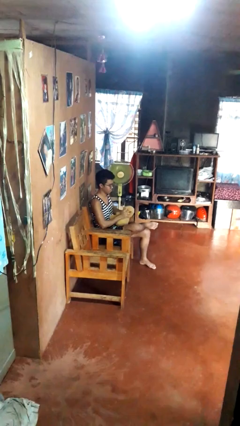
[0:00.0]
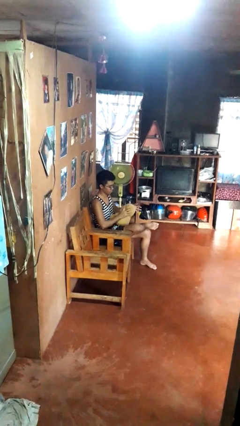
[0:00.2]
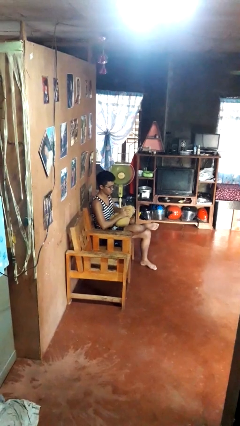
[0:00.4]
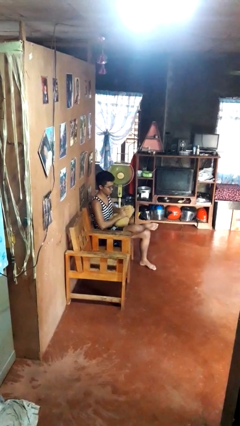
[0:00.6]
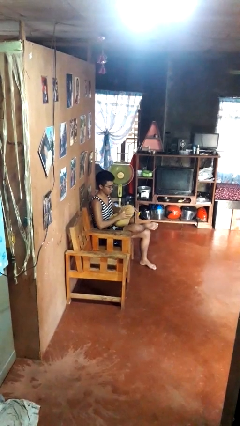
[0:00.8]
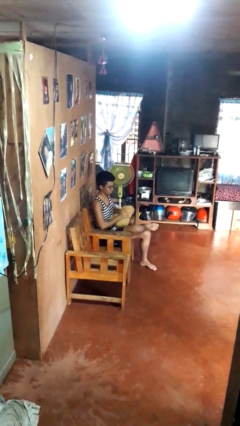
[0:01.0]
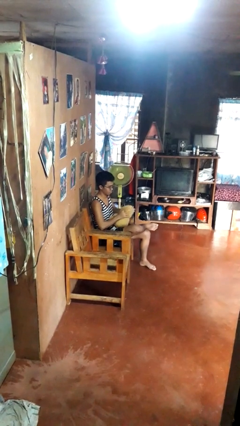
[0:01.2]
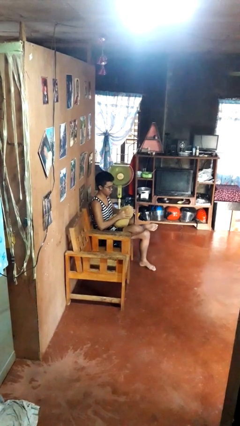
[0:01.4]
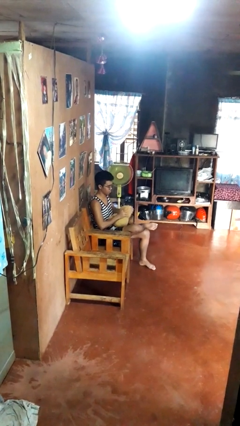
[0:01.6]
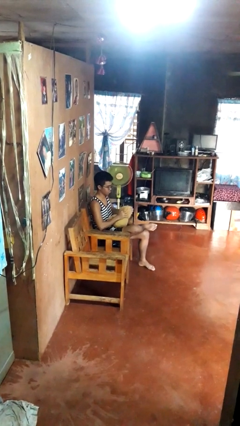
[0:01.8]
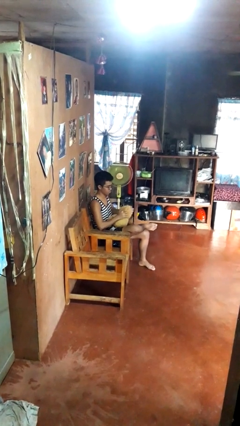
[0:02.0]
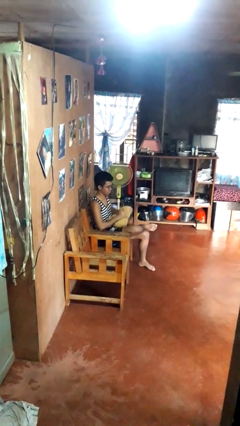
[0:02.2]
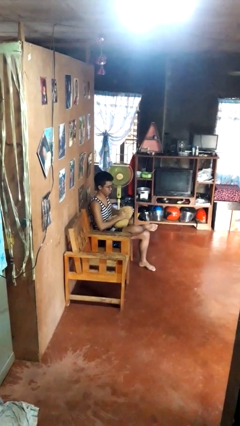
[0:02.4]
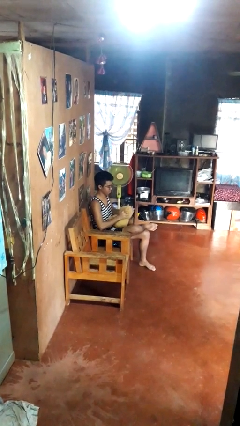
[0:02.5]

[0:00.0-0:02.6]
person squeezes object

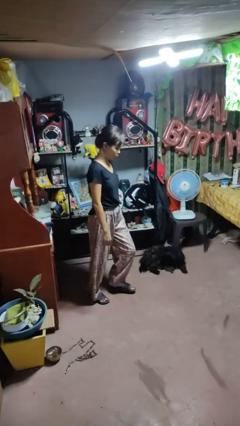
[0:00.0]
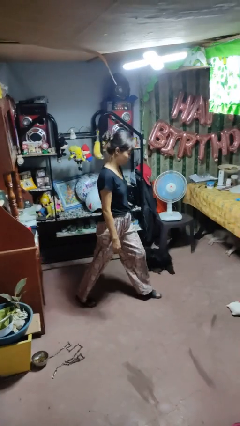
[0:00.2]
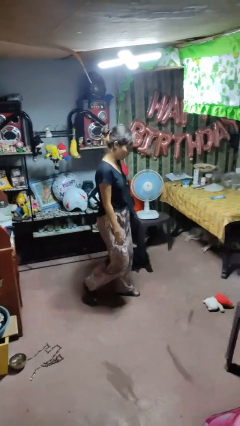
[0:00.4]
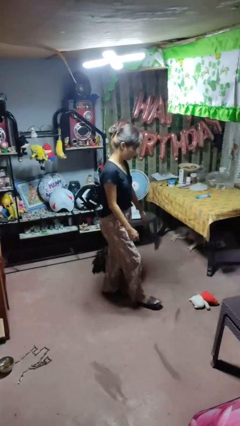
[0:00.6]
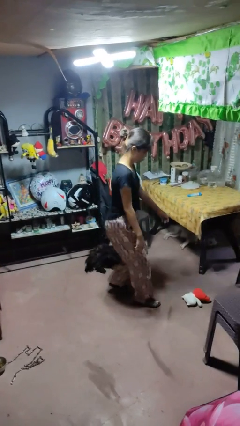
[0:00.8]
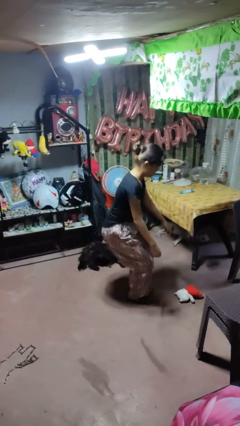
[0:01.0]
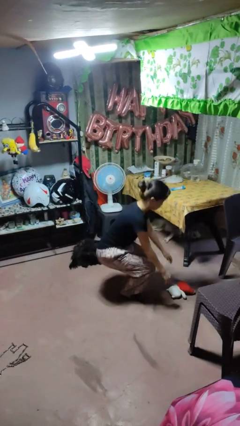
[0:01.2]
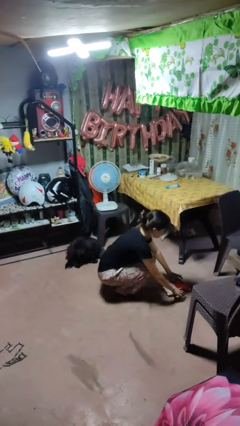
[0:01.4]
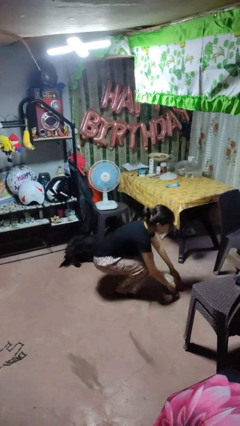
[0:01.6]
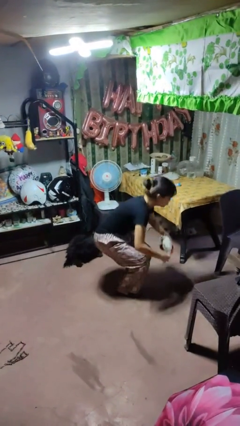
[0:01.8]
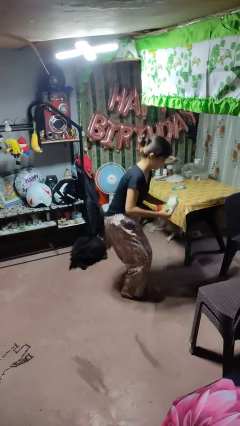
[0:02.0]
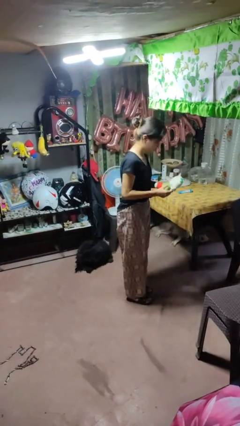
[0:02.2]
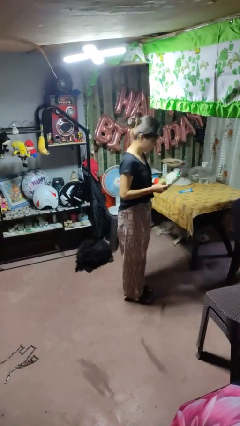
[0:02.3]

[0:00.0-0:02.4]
person picks up object from floor

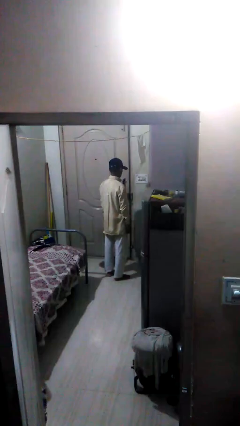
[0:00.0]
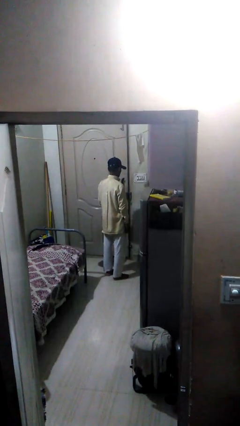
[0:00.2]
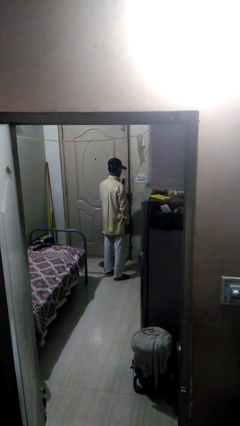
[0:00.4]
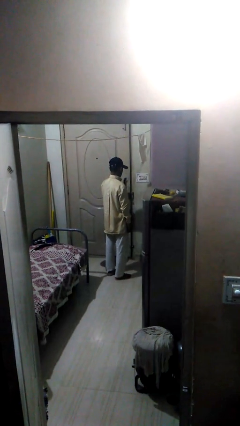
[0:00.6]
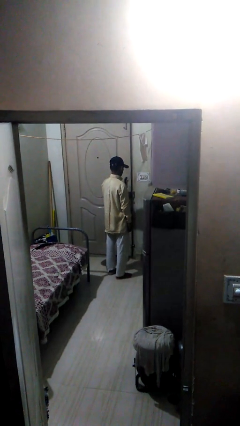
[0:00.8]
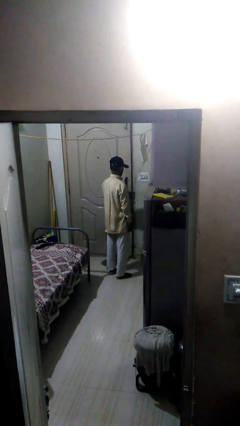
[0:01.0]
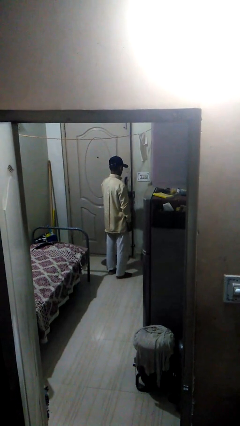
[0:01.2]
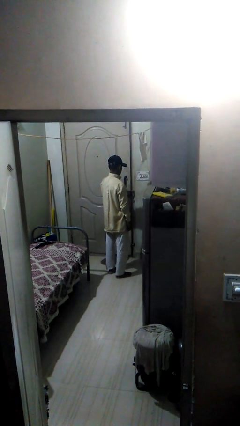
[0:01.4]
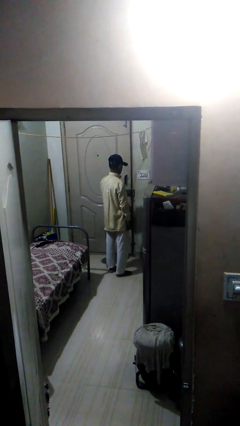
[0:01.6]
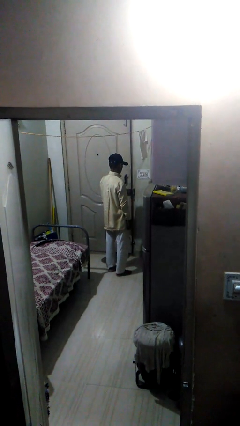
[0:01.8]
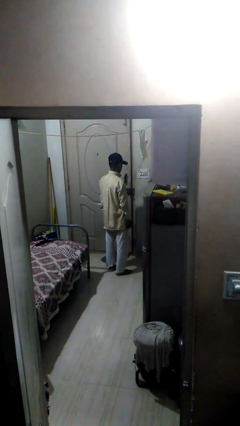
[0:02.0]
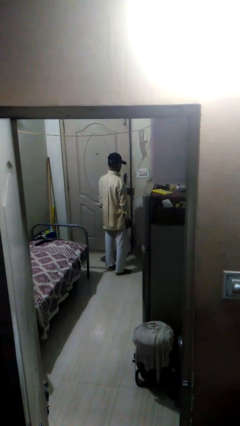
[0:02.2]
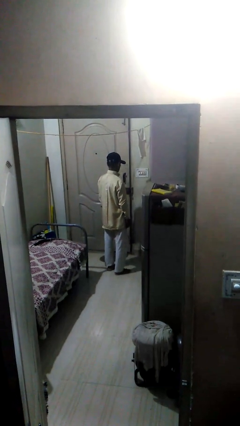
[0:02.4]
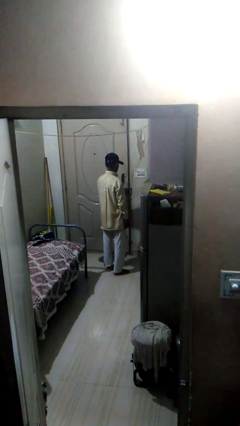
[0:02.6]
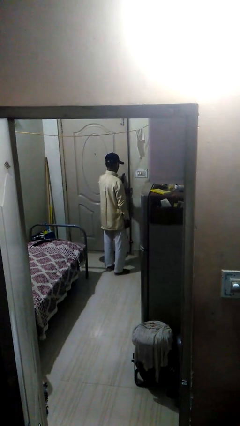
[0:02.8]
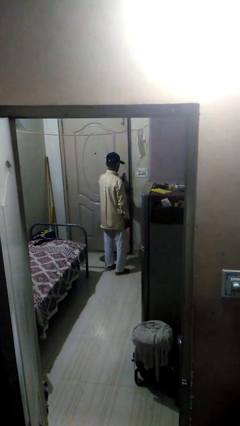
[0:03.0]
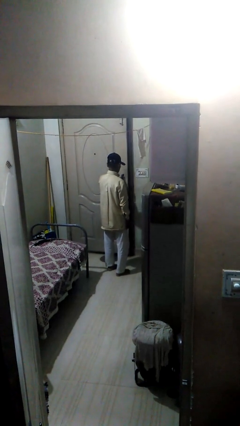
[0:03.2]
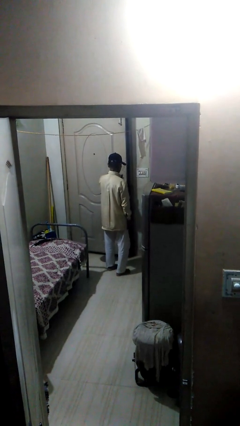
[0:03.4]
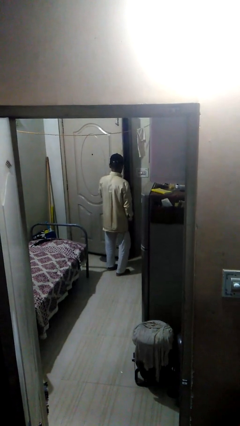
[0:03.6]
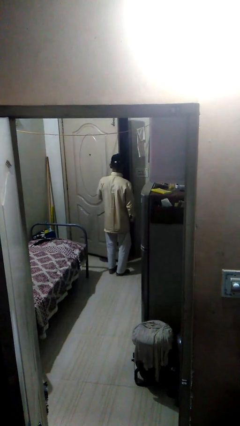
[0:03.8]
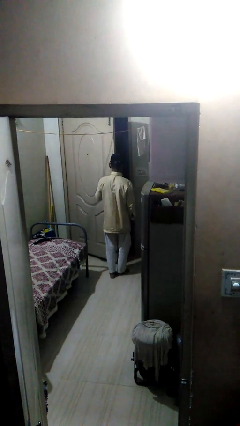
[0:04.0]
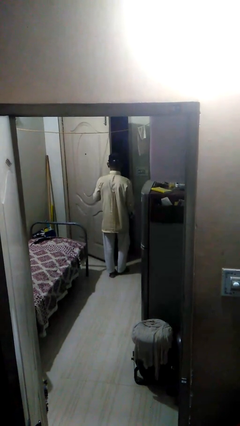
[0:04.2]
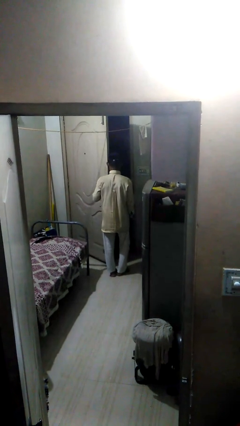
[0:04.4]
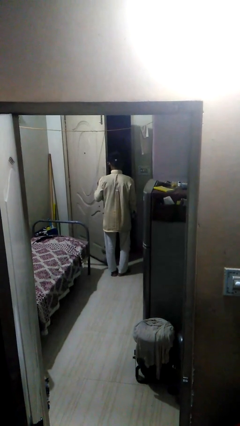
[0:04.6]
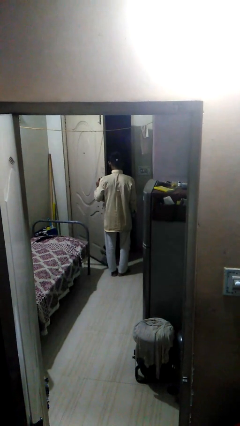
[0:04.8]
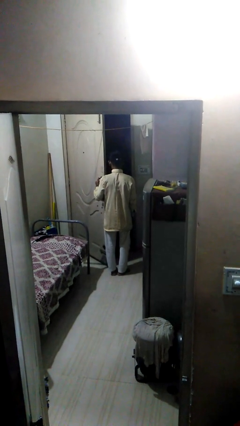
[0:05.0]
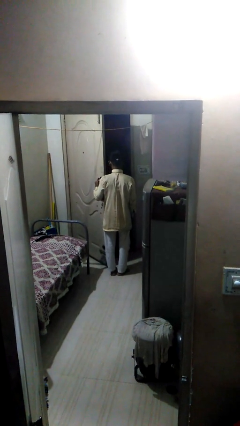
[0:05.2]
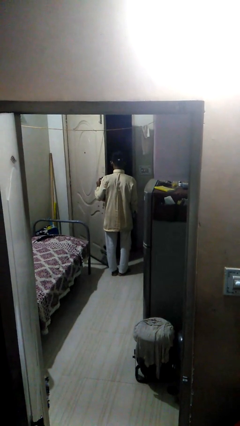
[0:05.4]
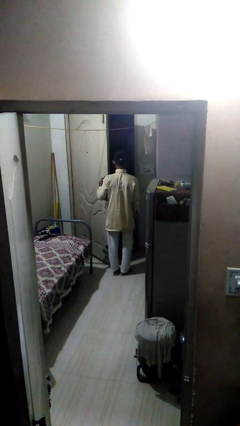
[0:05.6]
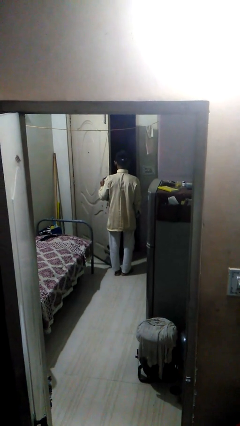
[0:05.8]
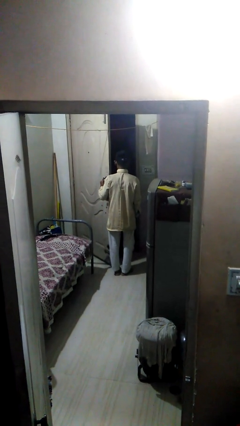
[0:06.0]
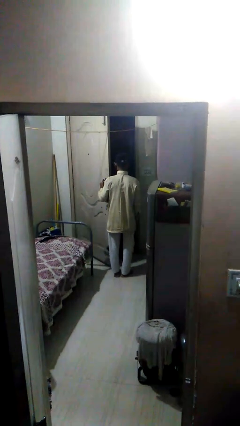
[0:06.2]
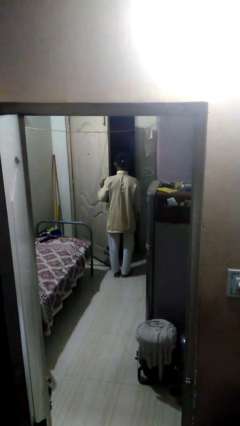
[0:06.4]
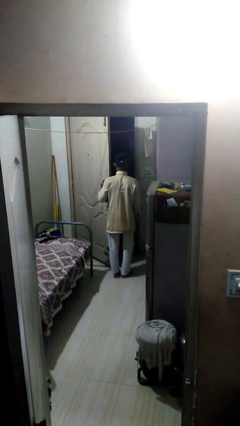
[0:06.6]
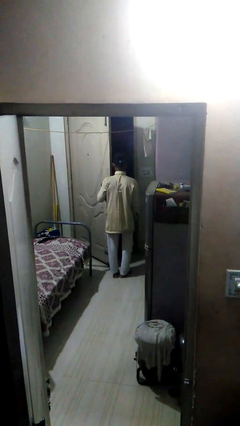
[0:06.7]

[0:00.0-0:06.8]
person opens facility door

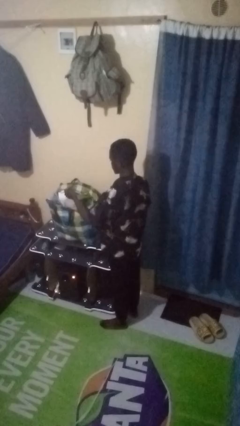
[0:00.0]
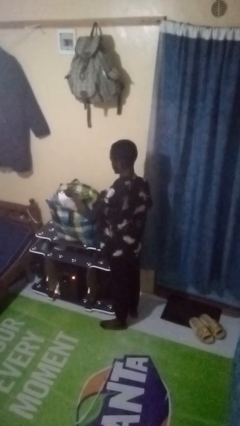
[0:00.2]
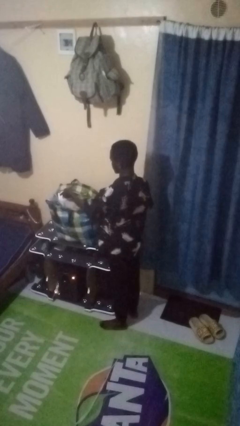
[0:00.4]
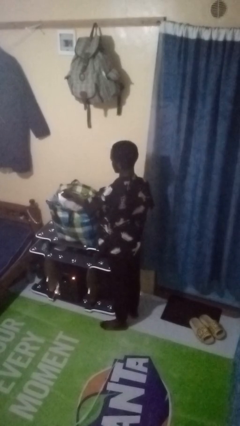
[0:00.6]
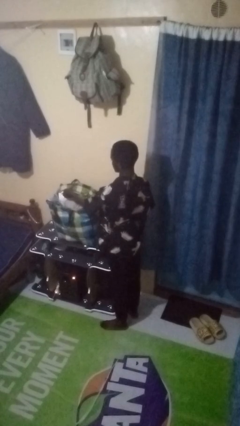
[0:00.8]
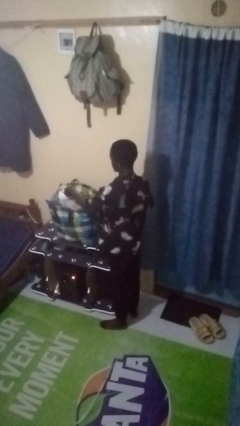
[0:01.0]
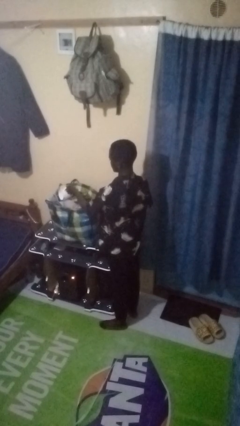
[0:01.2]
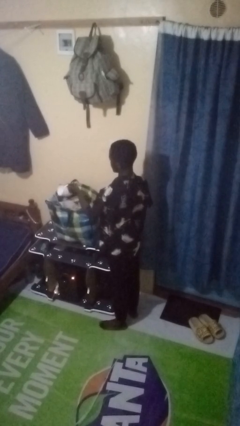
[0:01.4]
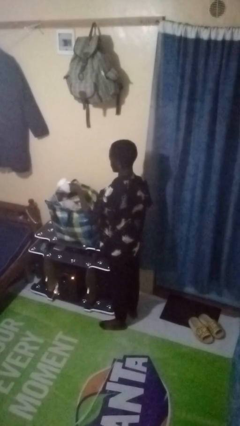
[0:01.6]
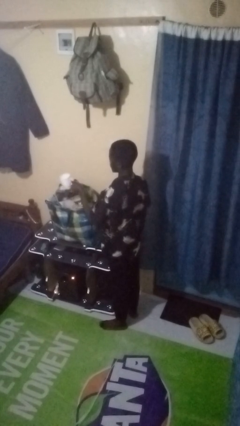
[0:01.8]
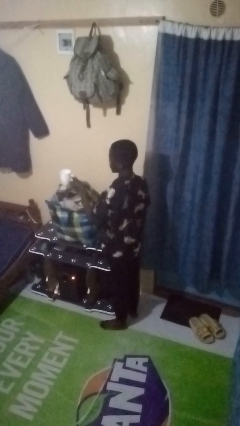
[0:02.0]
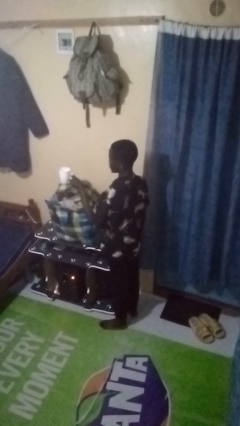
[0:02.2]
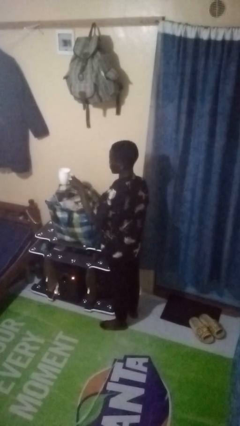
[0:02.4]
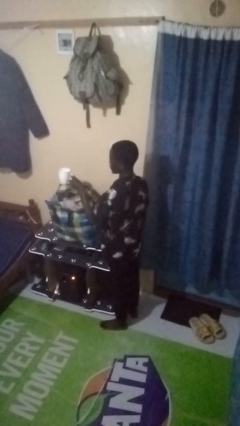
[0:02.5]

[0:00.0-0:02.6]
person takes object from bag

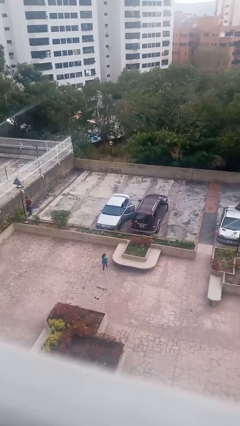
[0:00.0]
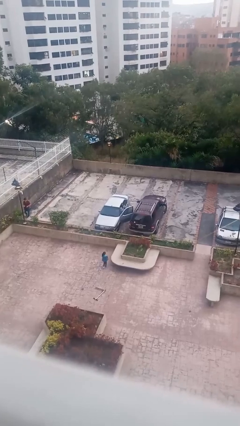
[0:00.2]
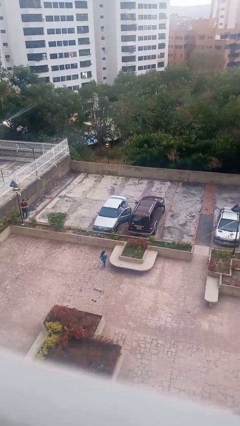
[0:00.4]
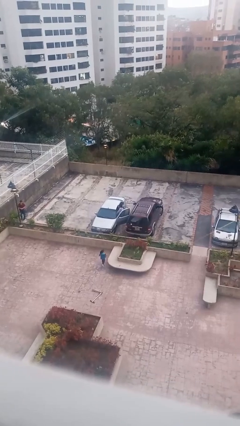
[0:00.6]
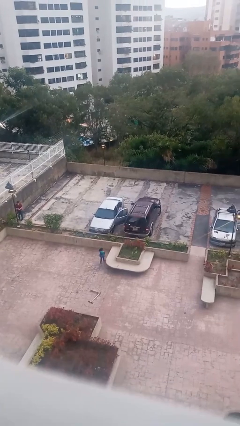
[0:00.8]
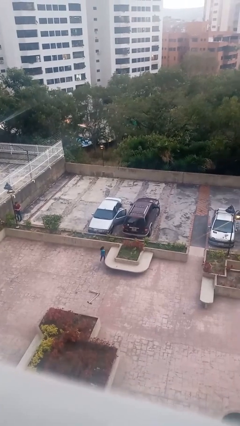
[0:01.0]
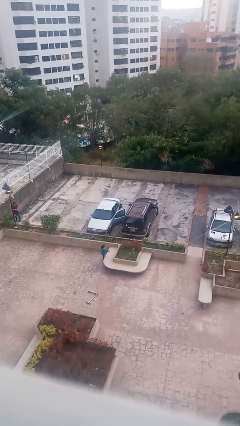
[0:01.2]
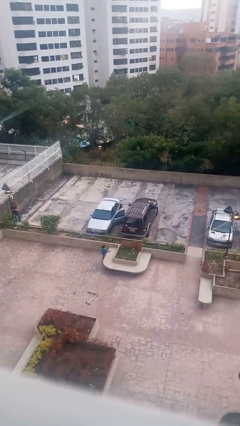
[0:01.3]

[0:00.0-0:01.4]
person exits car

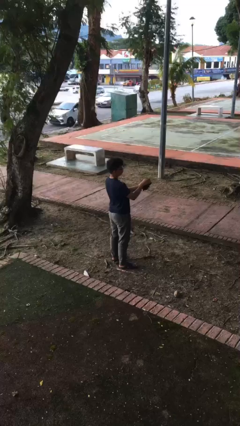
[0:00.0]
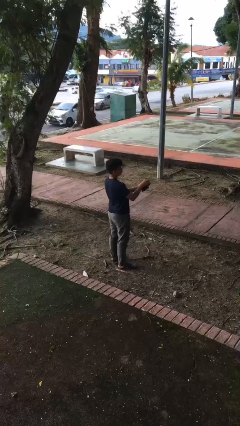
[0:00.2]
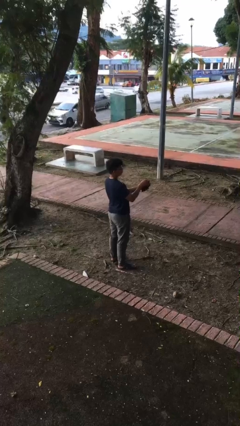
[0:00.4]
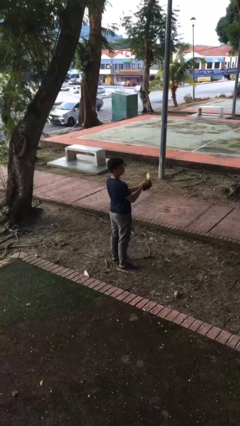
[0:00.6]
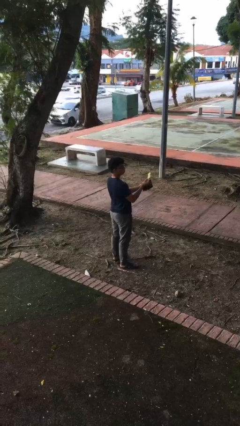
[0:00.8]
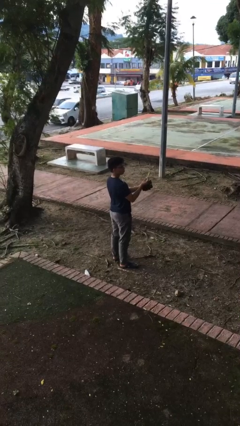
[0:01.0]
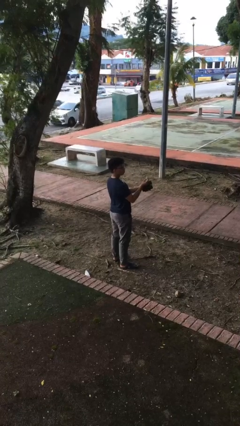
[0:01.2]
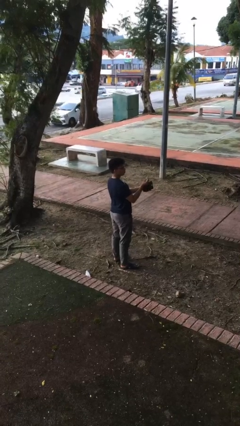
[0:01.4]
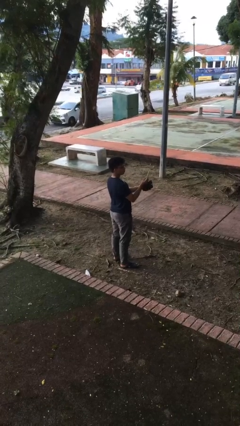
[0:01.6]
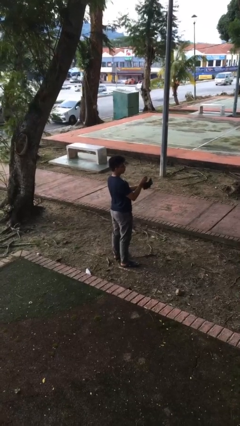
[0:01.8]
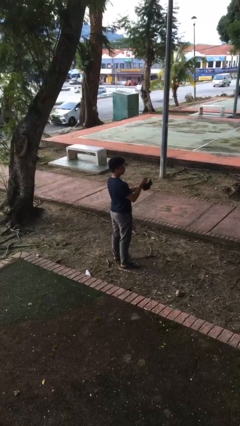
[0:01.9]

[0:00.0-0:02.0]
person takes object from purse
